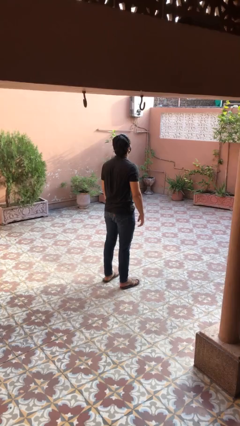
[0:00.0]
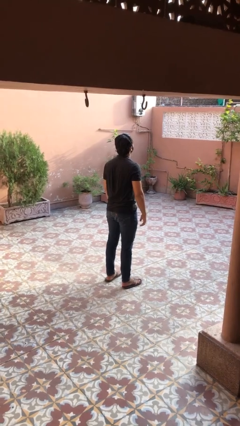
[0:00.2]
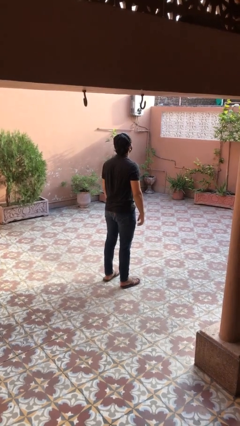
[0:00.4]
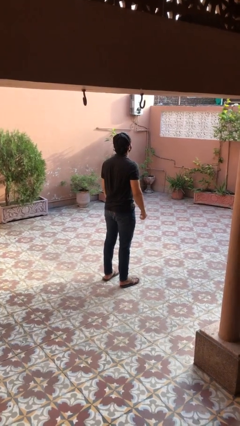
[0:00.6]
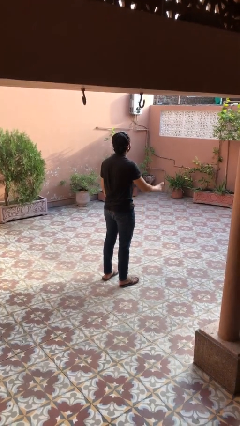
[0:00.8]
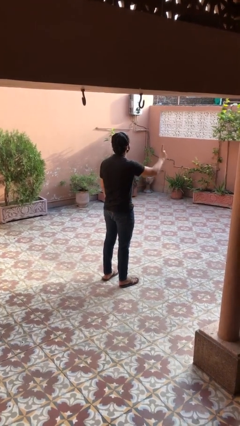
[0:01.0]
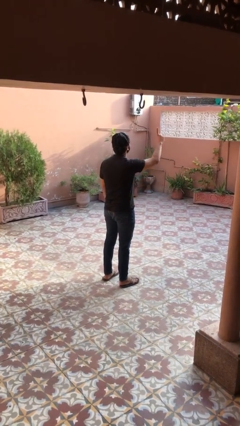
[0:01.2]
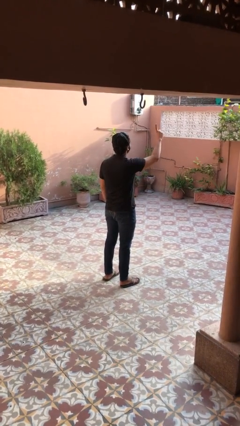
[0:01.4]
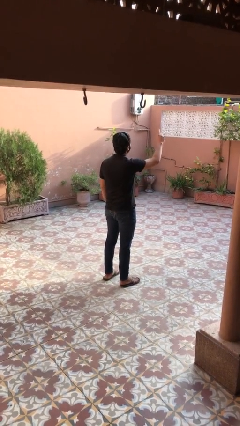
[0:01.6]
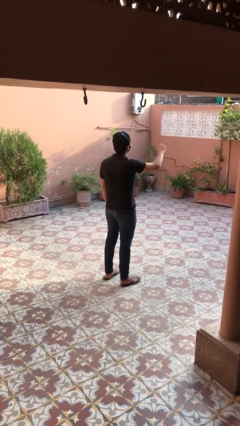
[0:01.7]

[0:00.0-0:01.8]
person gestures number one

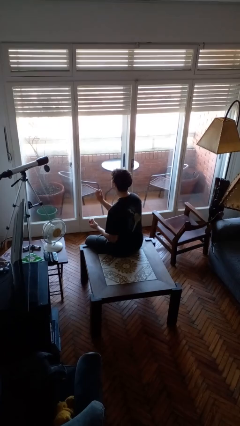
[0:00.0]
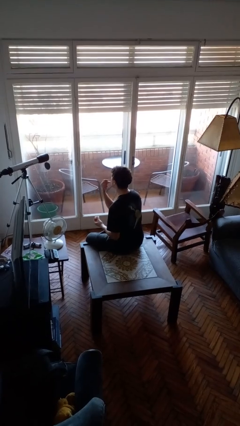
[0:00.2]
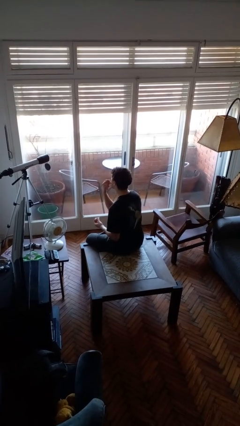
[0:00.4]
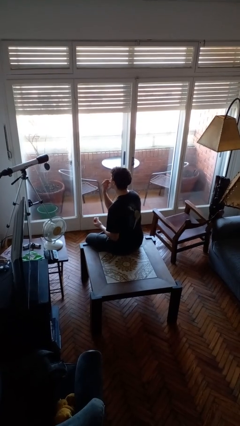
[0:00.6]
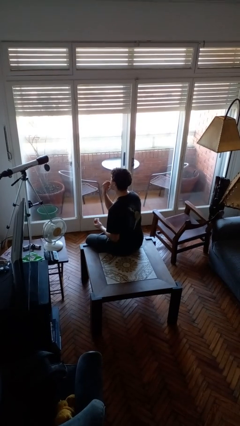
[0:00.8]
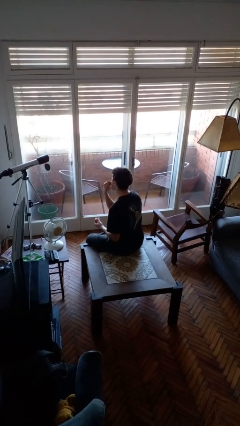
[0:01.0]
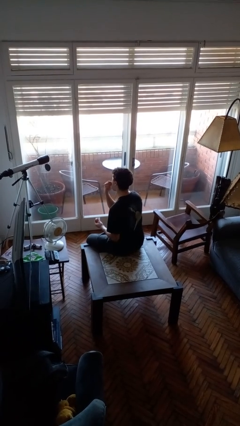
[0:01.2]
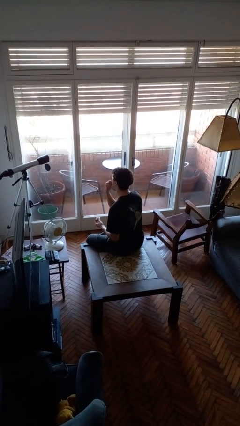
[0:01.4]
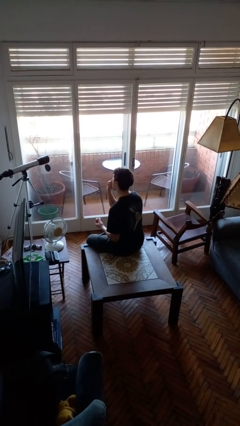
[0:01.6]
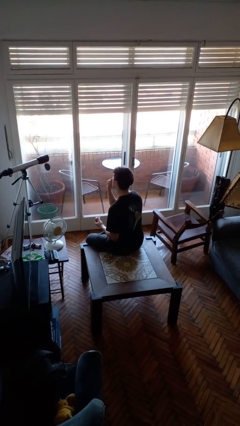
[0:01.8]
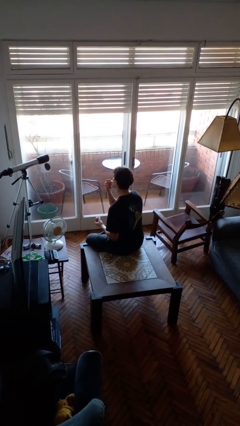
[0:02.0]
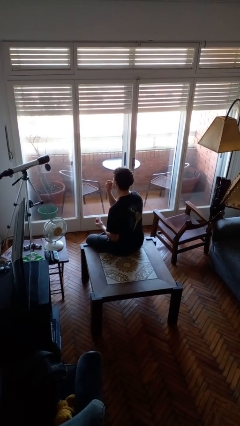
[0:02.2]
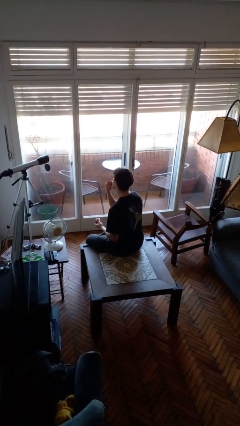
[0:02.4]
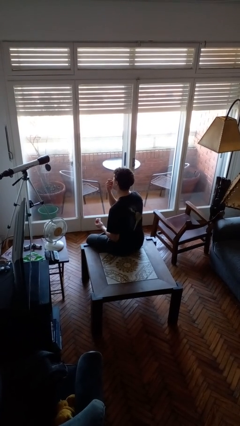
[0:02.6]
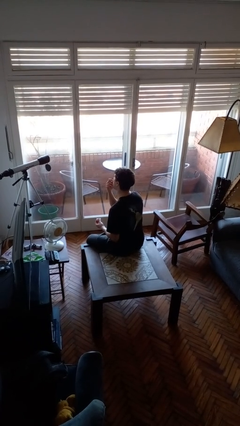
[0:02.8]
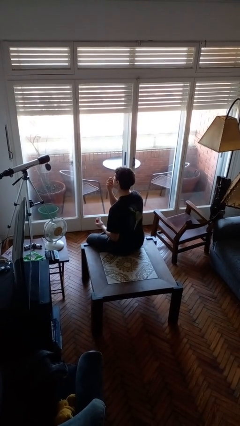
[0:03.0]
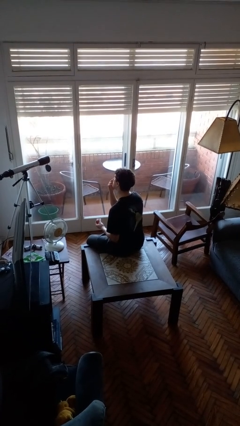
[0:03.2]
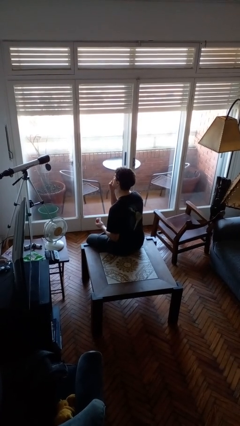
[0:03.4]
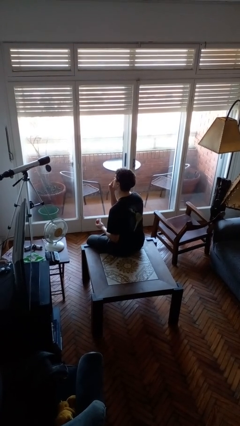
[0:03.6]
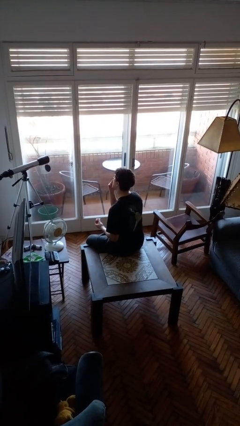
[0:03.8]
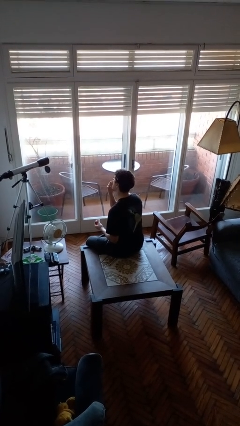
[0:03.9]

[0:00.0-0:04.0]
person applies lip makeup

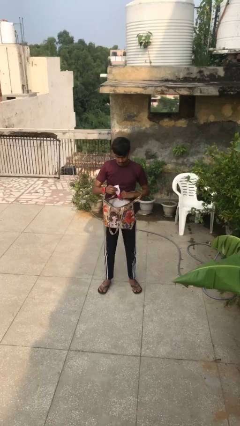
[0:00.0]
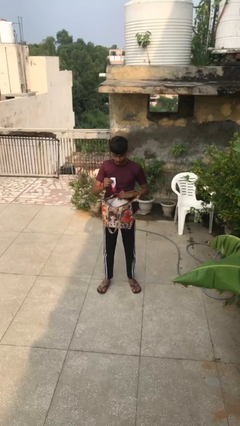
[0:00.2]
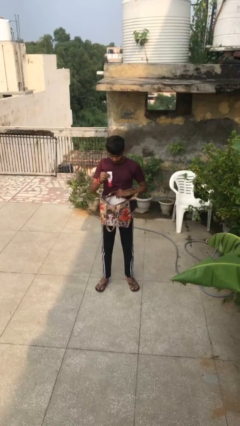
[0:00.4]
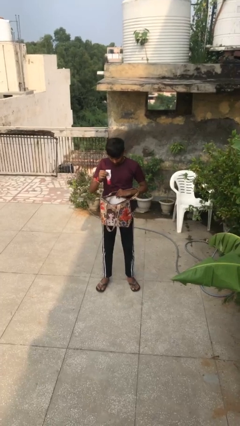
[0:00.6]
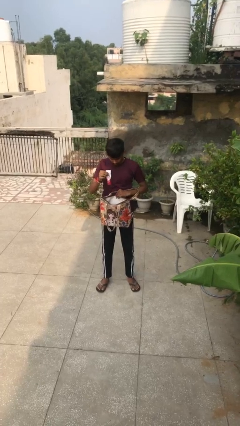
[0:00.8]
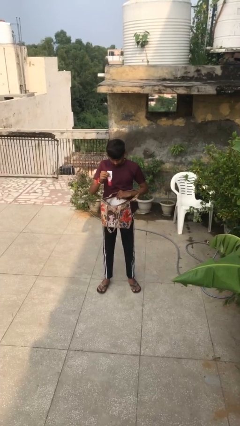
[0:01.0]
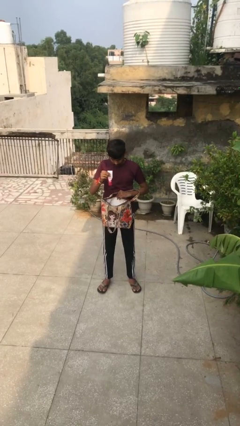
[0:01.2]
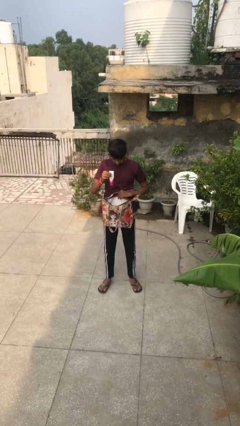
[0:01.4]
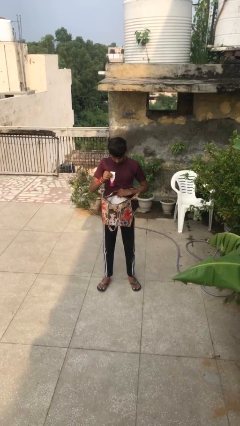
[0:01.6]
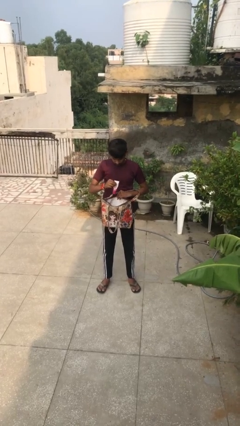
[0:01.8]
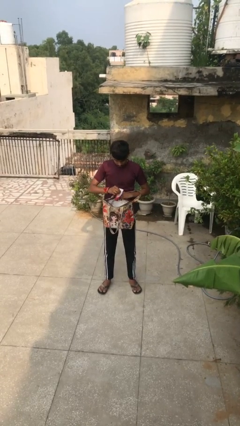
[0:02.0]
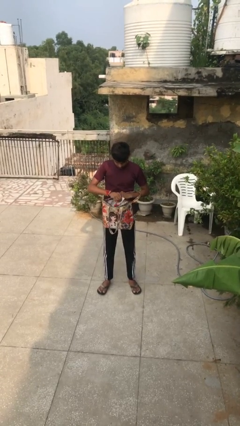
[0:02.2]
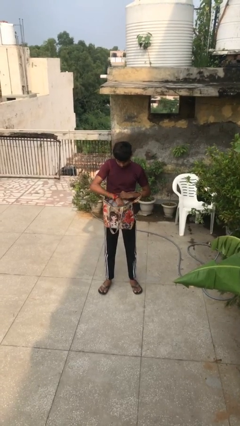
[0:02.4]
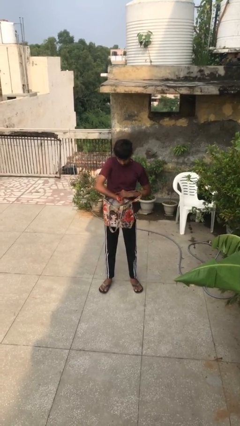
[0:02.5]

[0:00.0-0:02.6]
person takes object from purse

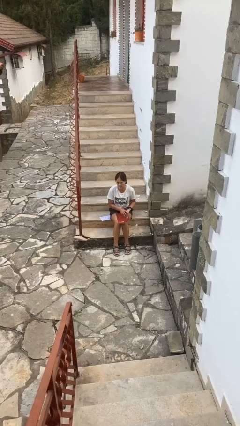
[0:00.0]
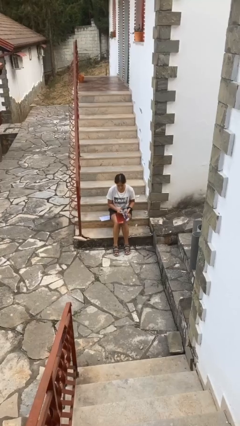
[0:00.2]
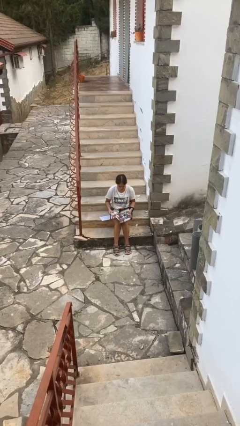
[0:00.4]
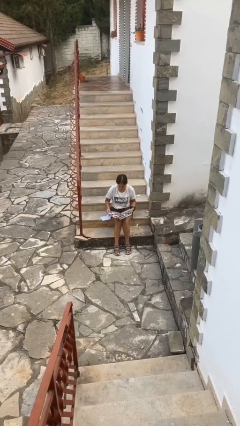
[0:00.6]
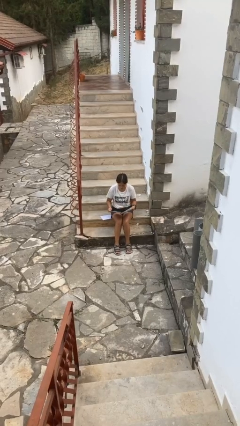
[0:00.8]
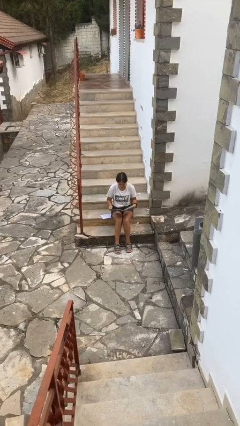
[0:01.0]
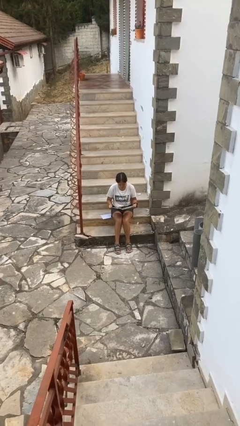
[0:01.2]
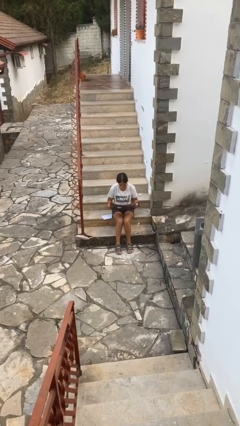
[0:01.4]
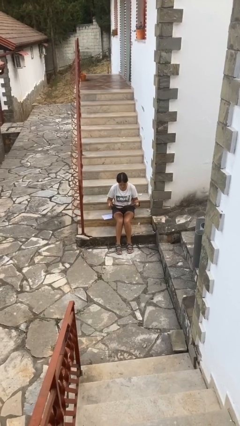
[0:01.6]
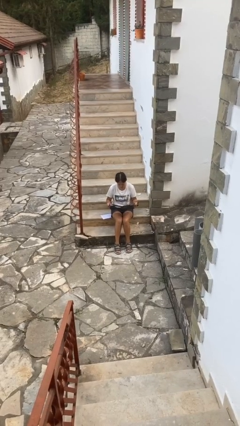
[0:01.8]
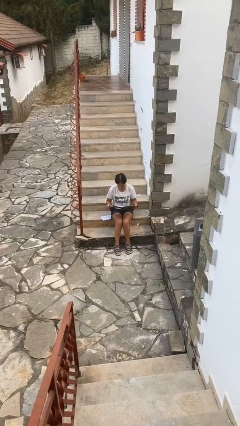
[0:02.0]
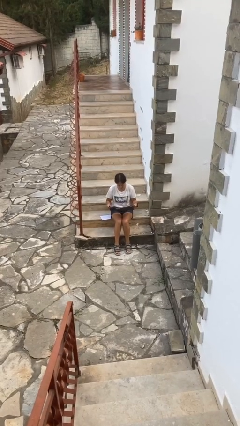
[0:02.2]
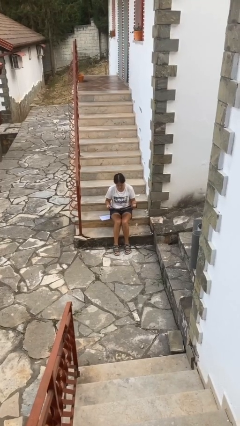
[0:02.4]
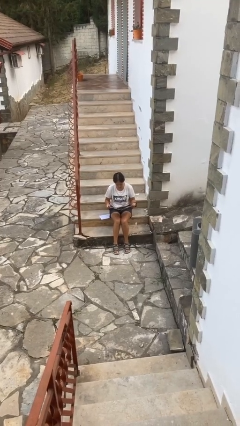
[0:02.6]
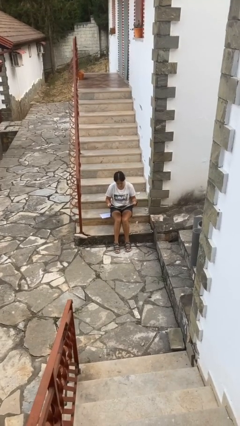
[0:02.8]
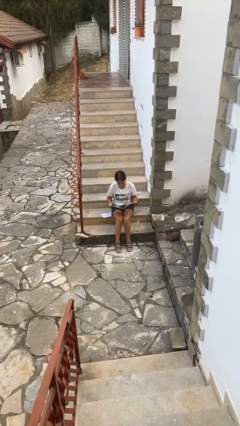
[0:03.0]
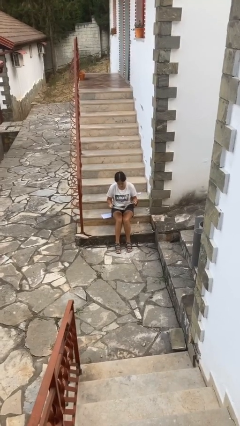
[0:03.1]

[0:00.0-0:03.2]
person reads magazine

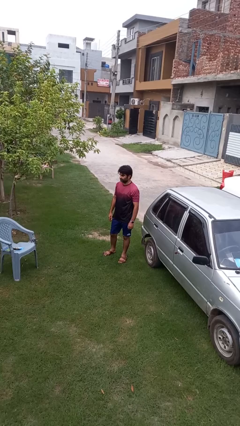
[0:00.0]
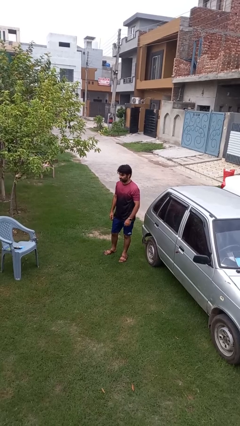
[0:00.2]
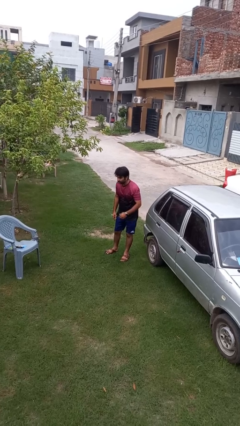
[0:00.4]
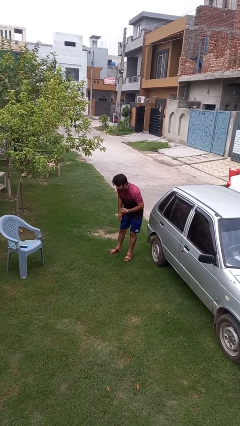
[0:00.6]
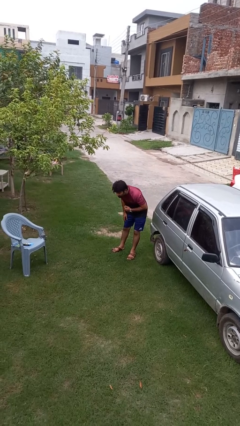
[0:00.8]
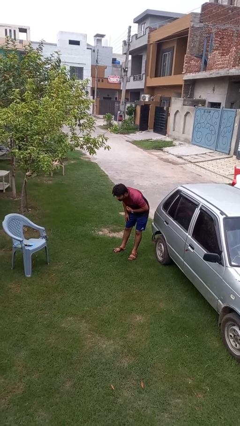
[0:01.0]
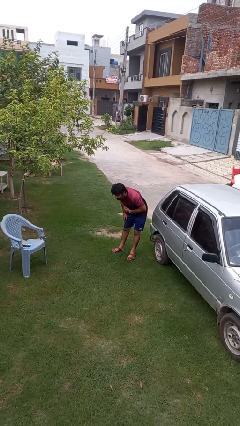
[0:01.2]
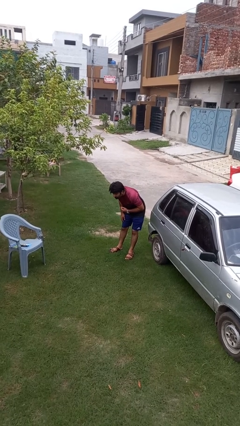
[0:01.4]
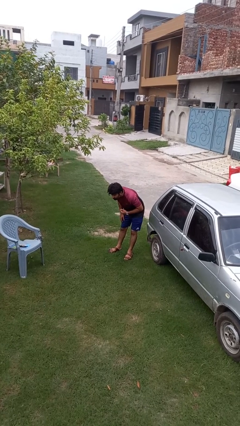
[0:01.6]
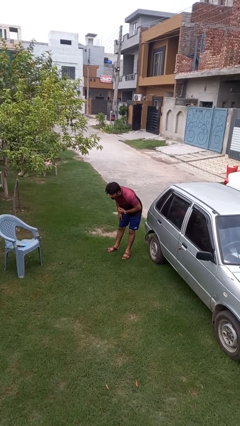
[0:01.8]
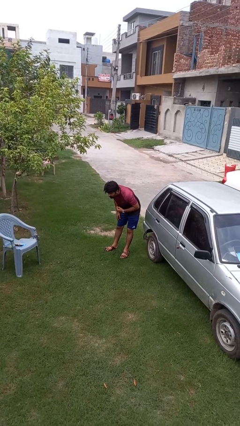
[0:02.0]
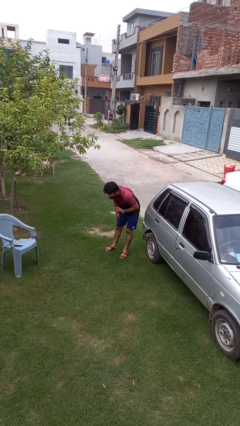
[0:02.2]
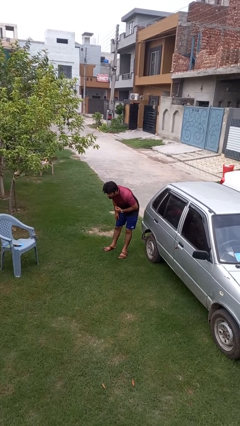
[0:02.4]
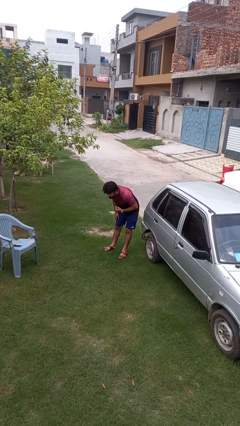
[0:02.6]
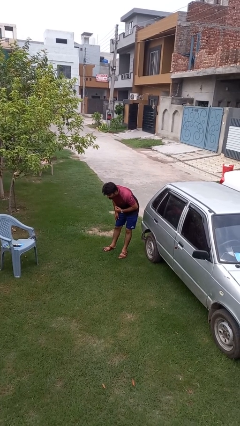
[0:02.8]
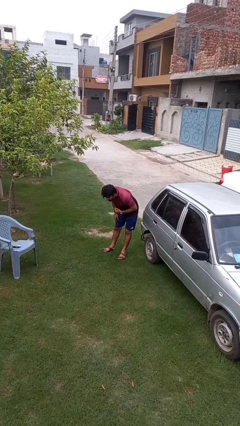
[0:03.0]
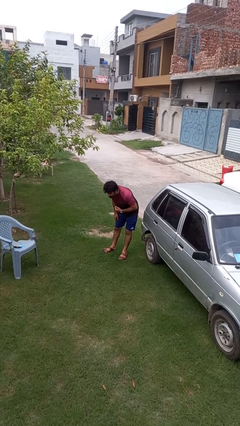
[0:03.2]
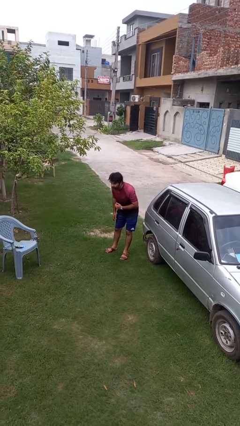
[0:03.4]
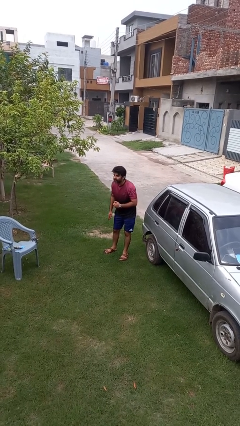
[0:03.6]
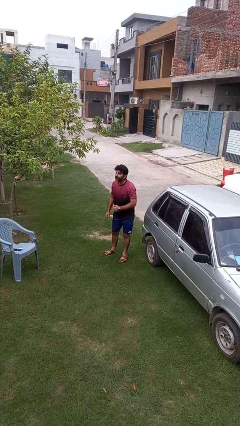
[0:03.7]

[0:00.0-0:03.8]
person bows

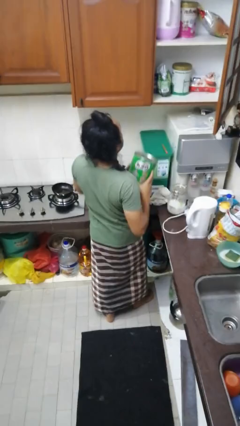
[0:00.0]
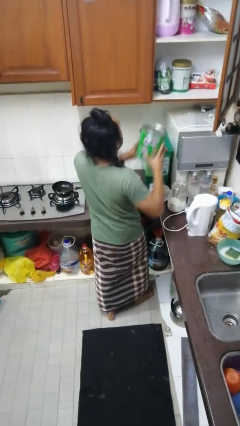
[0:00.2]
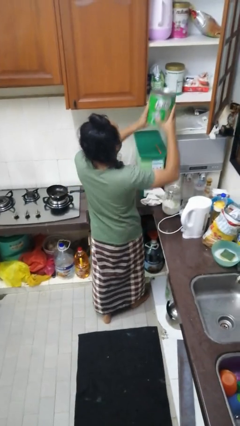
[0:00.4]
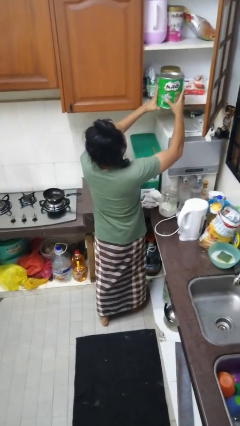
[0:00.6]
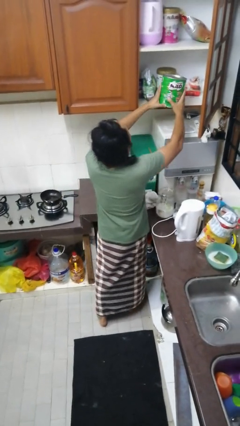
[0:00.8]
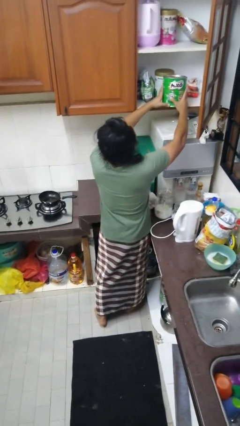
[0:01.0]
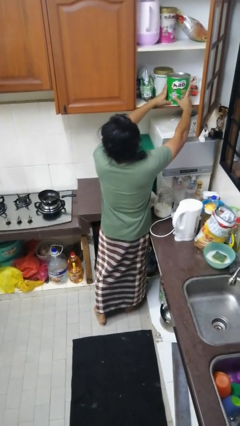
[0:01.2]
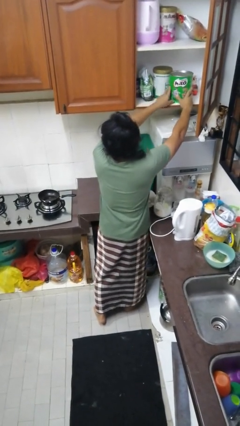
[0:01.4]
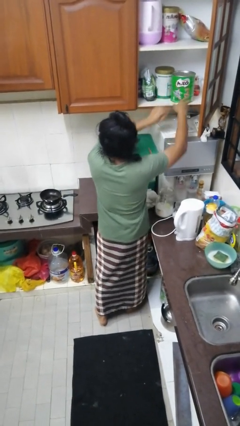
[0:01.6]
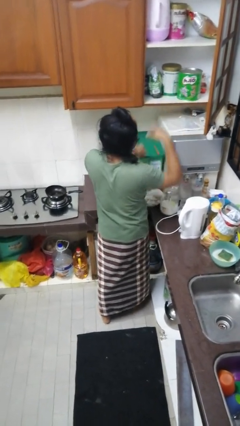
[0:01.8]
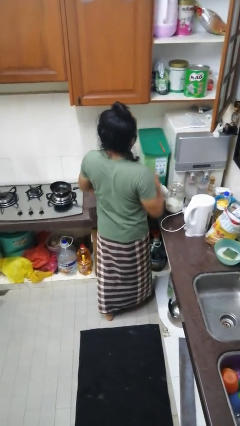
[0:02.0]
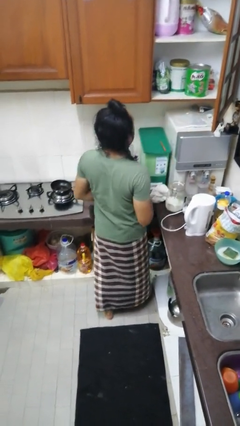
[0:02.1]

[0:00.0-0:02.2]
person puts object in cabinet
